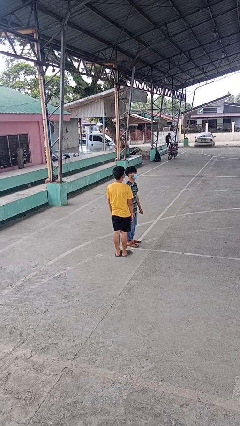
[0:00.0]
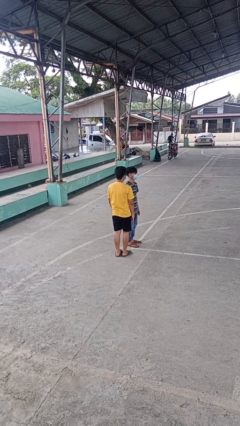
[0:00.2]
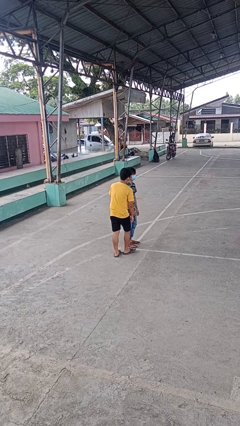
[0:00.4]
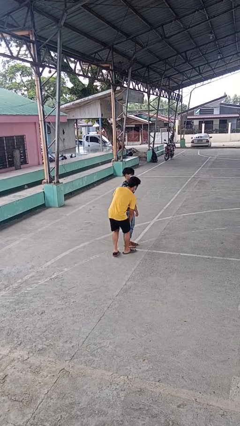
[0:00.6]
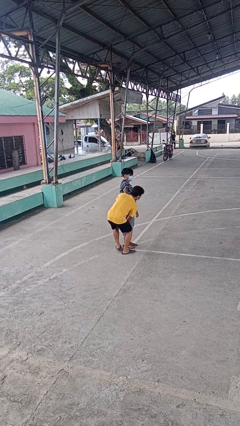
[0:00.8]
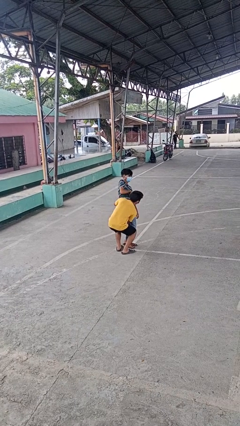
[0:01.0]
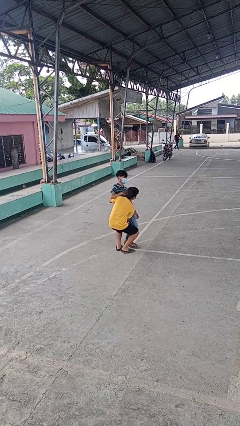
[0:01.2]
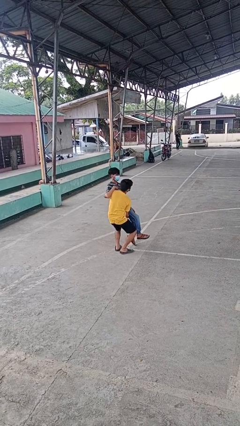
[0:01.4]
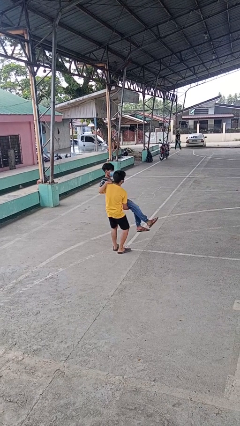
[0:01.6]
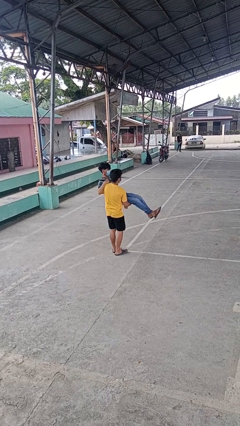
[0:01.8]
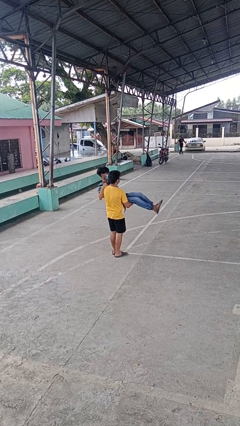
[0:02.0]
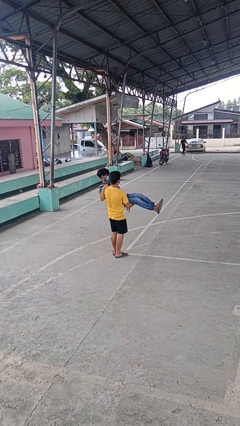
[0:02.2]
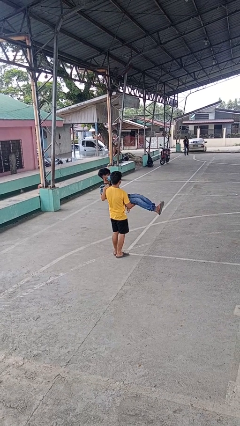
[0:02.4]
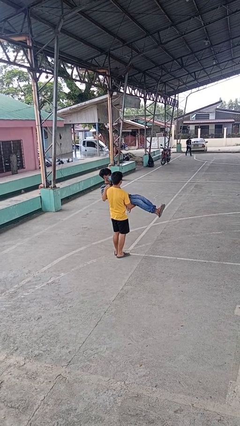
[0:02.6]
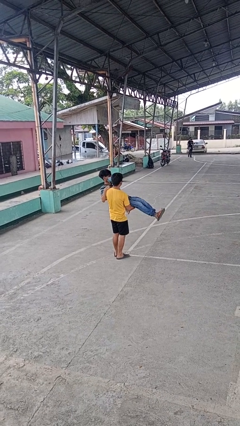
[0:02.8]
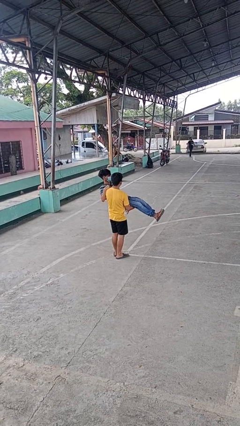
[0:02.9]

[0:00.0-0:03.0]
person picks up person

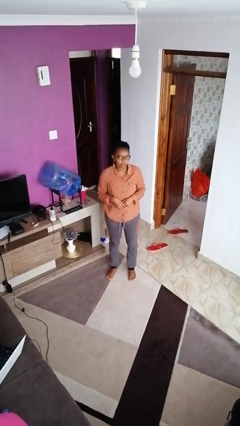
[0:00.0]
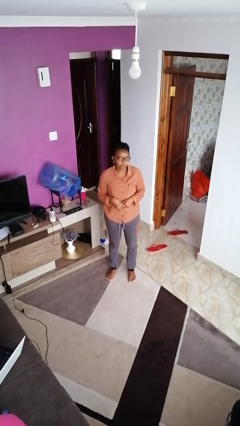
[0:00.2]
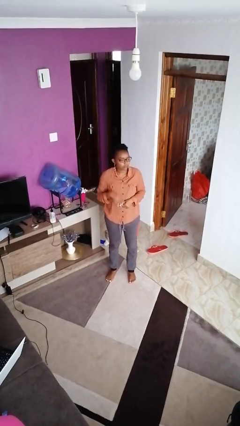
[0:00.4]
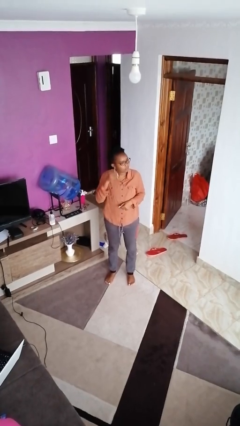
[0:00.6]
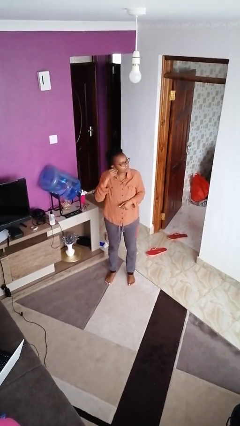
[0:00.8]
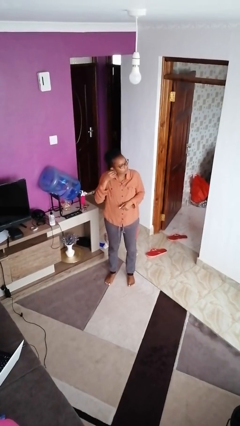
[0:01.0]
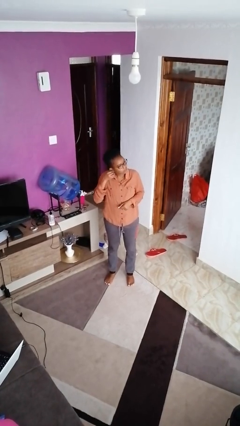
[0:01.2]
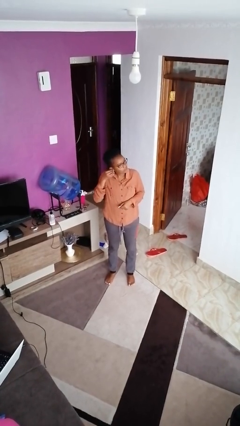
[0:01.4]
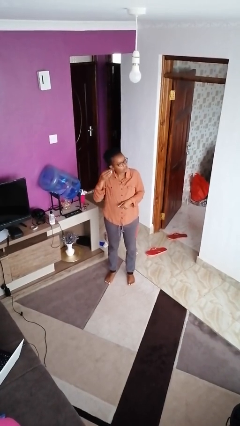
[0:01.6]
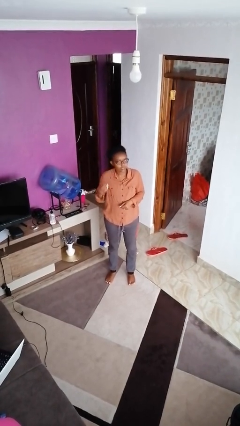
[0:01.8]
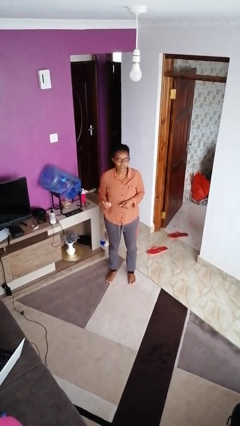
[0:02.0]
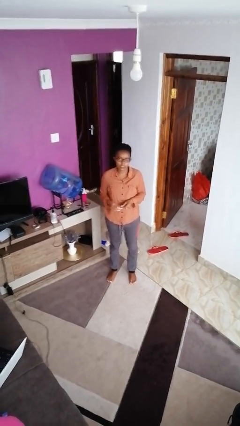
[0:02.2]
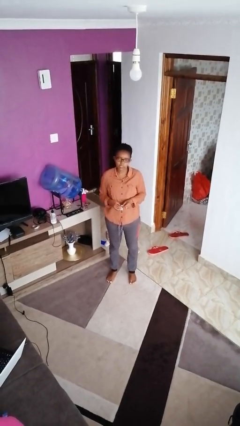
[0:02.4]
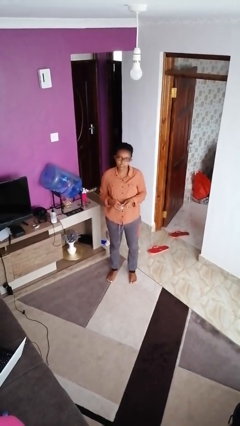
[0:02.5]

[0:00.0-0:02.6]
person takes off earrings

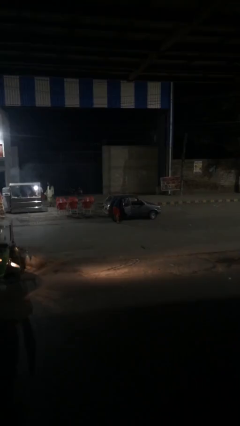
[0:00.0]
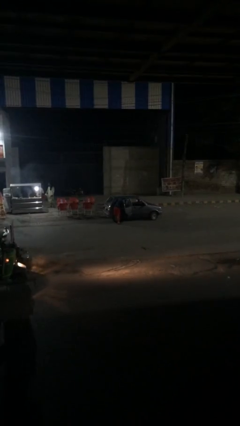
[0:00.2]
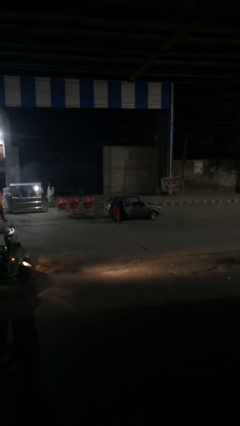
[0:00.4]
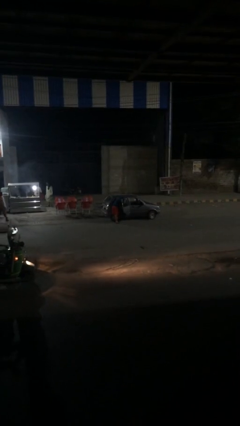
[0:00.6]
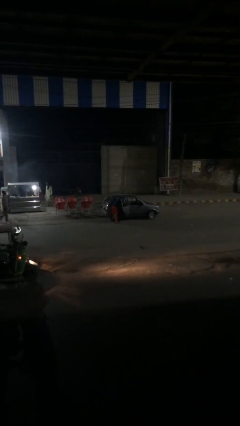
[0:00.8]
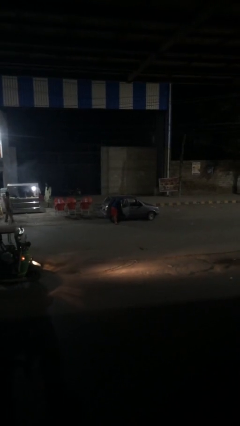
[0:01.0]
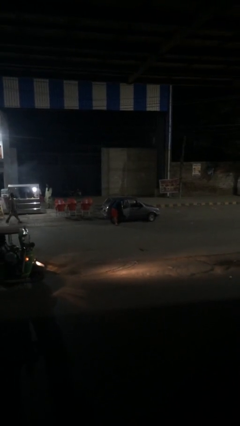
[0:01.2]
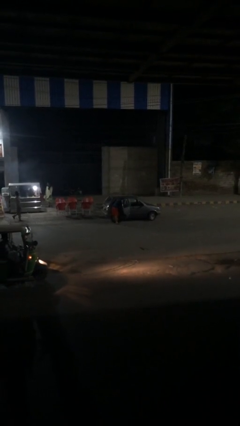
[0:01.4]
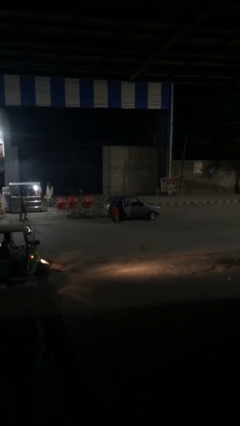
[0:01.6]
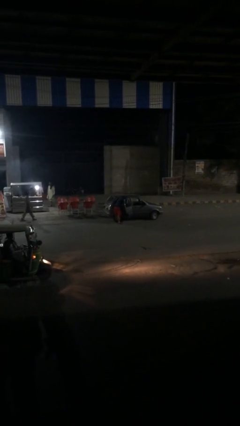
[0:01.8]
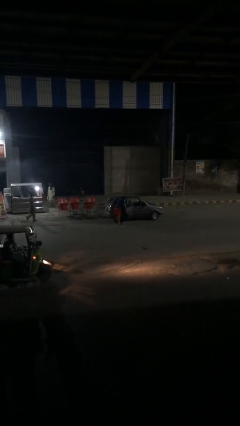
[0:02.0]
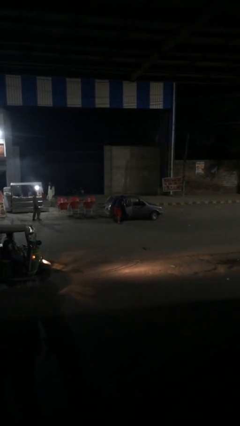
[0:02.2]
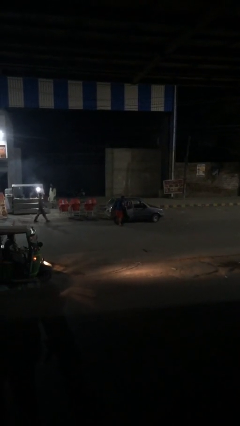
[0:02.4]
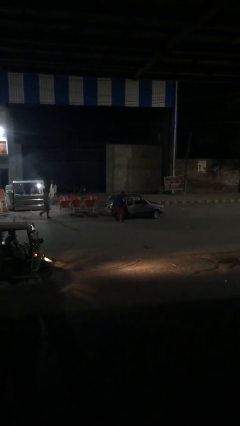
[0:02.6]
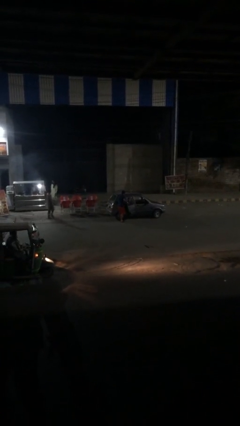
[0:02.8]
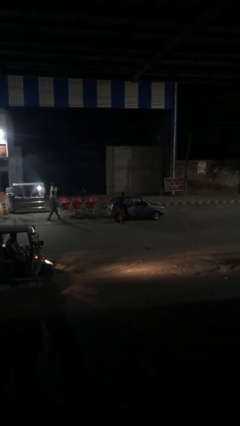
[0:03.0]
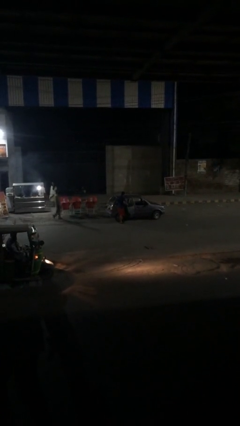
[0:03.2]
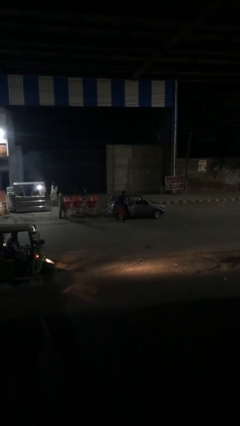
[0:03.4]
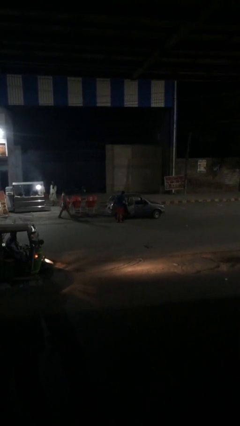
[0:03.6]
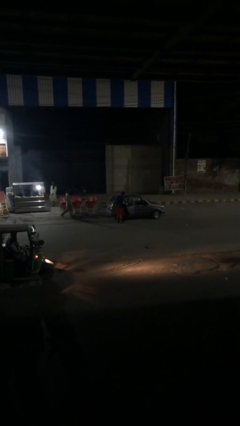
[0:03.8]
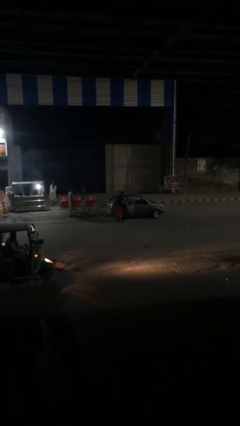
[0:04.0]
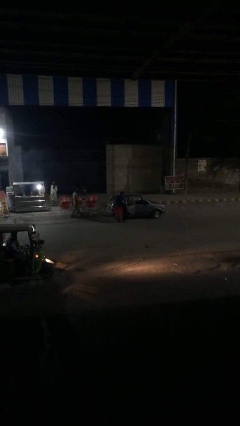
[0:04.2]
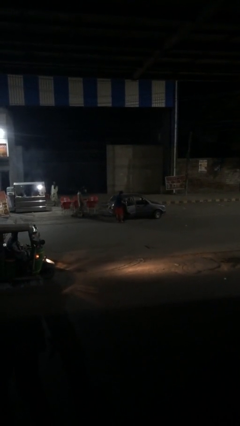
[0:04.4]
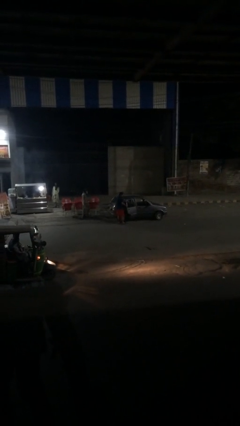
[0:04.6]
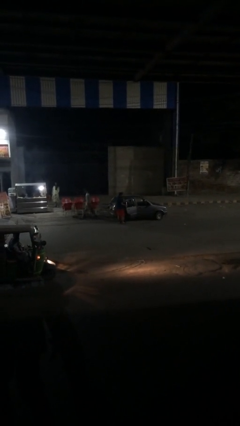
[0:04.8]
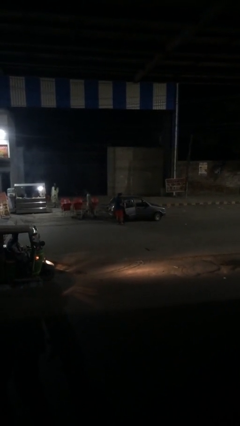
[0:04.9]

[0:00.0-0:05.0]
person unloads car

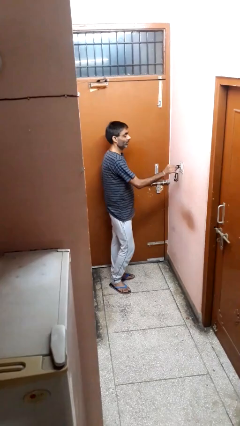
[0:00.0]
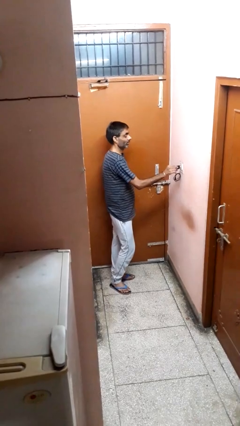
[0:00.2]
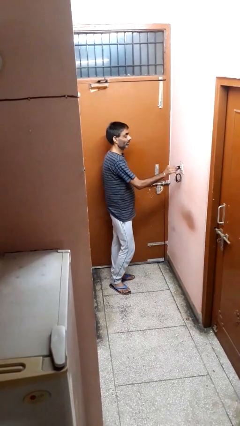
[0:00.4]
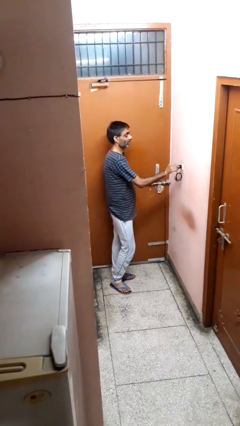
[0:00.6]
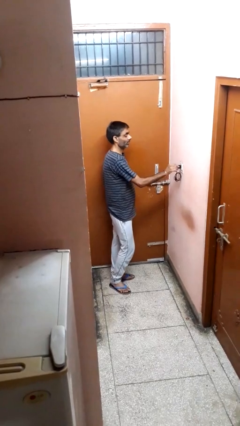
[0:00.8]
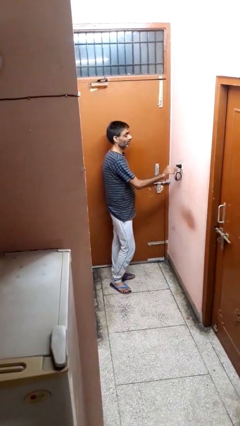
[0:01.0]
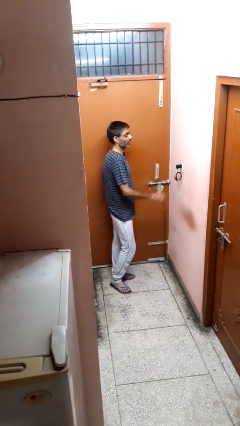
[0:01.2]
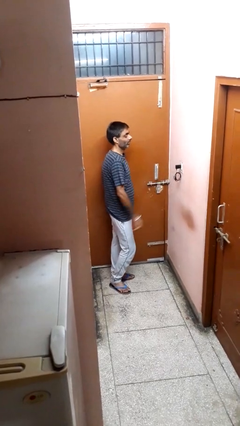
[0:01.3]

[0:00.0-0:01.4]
person plugs into electrical socket

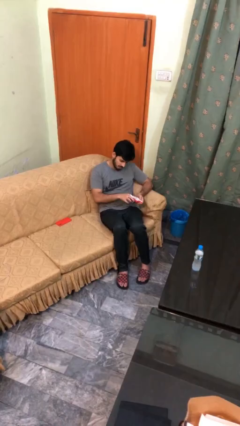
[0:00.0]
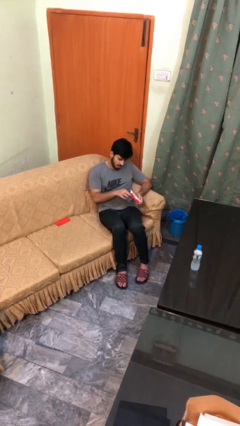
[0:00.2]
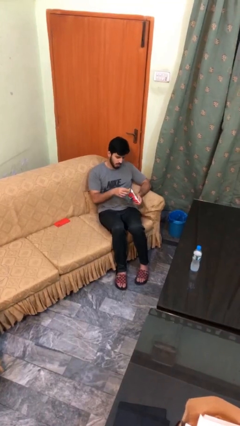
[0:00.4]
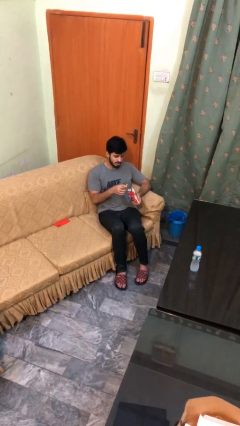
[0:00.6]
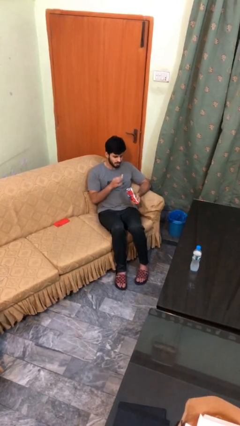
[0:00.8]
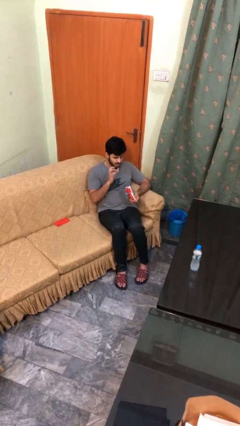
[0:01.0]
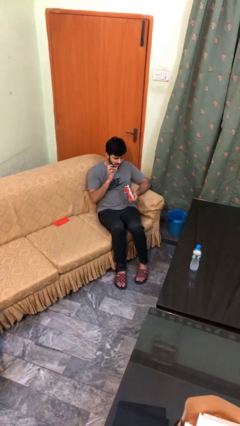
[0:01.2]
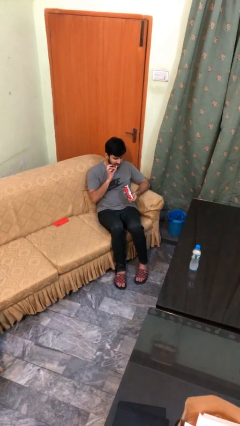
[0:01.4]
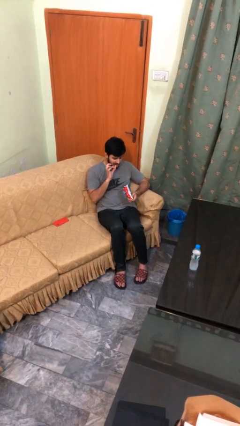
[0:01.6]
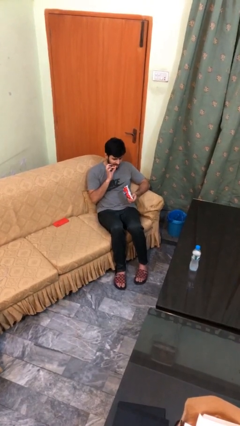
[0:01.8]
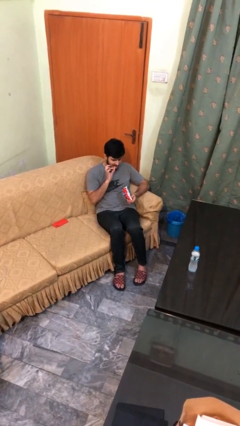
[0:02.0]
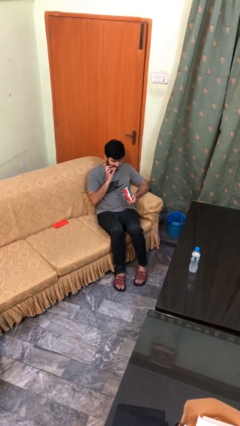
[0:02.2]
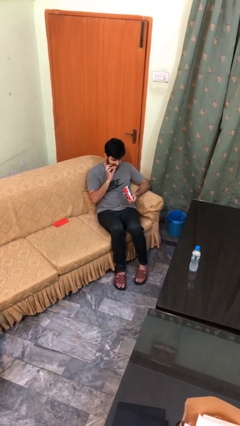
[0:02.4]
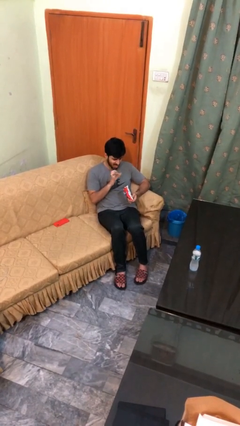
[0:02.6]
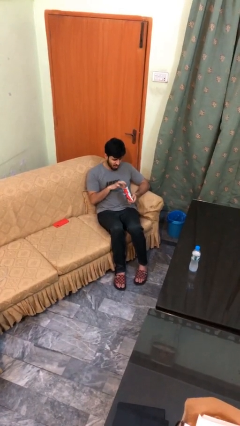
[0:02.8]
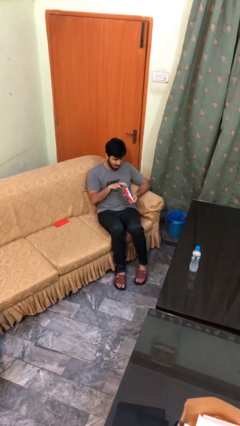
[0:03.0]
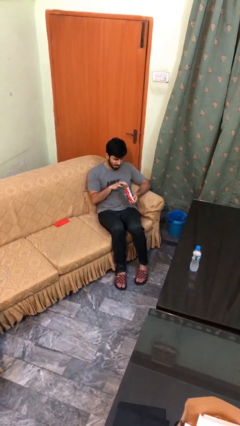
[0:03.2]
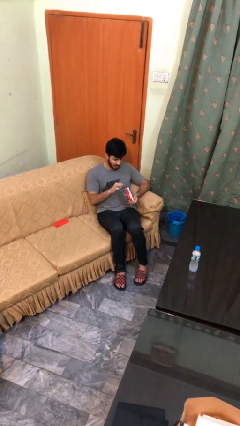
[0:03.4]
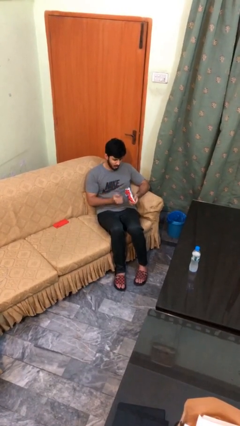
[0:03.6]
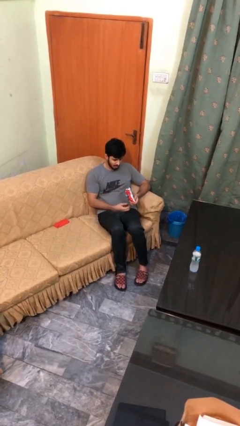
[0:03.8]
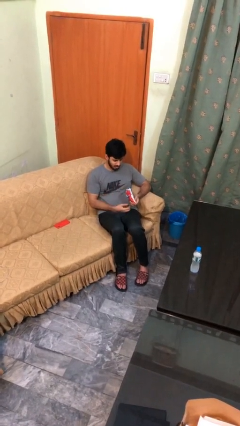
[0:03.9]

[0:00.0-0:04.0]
person eats snack from bag

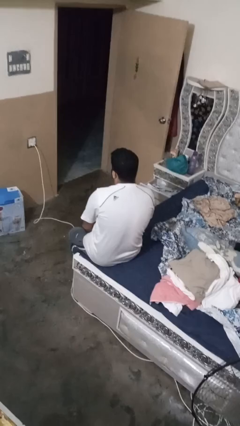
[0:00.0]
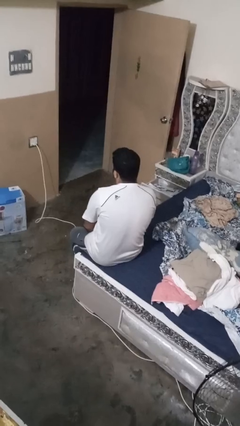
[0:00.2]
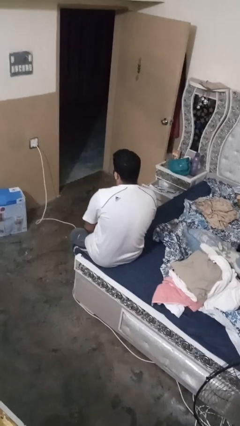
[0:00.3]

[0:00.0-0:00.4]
person snaps fingers

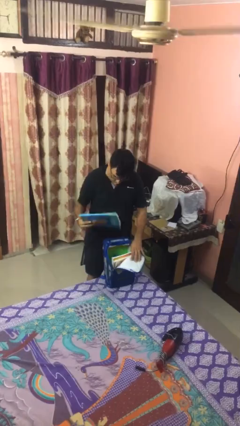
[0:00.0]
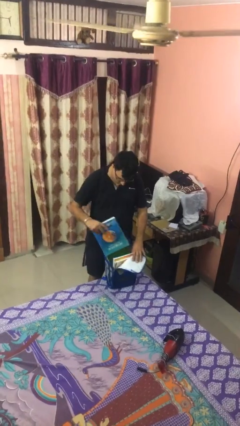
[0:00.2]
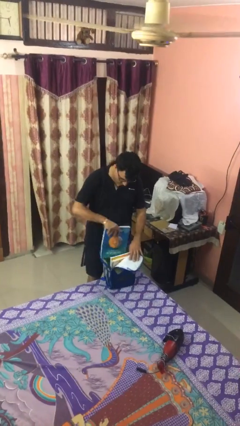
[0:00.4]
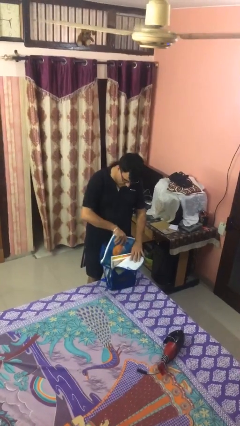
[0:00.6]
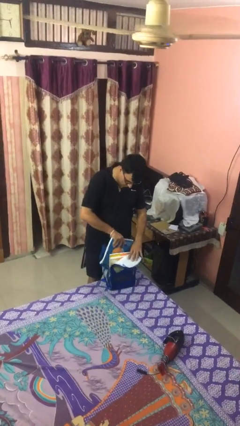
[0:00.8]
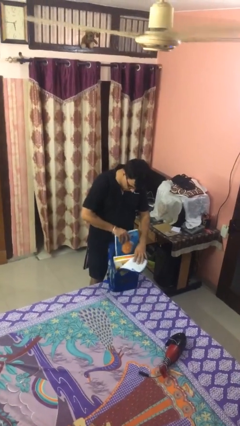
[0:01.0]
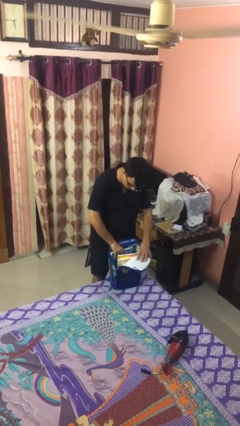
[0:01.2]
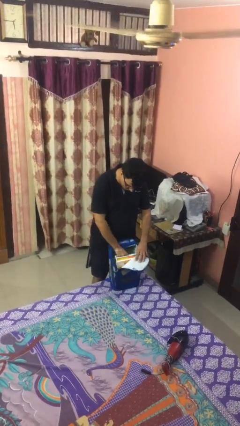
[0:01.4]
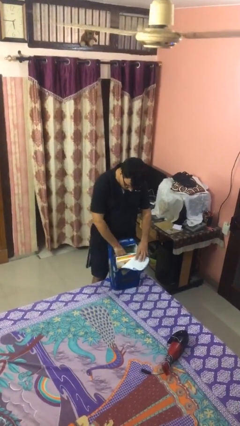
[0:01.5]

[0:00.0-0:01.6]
person puts object into backpack
